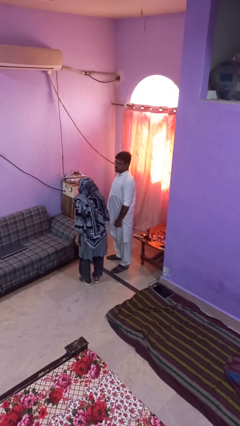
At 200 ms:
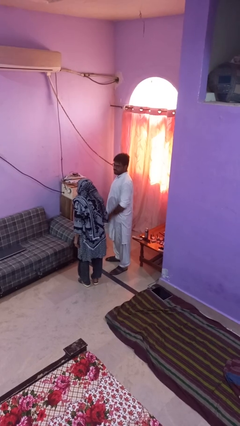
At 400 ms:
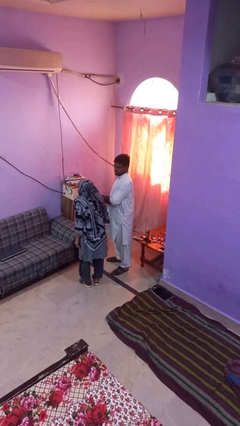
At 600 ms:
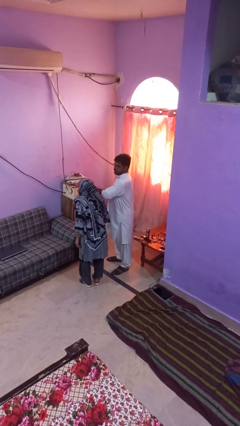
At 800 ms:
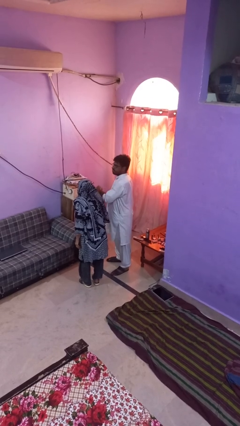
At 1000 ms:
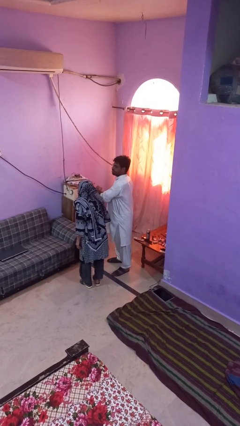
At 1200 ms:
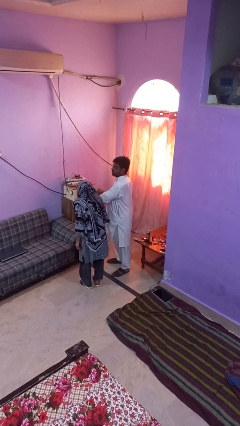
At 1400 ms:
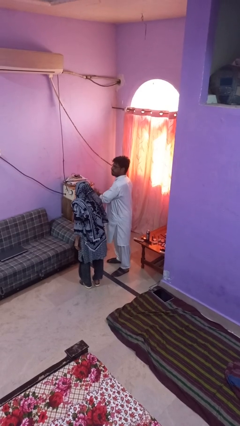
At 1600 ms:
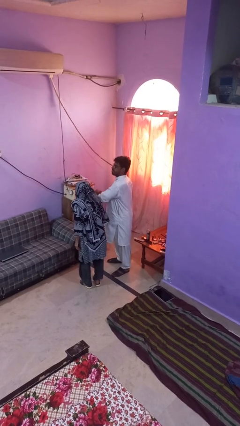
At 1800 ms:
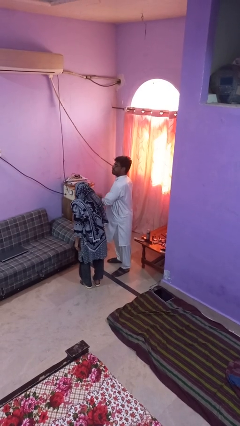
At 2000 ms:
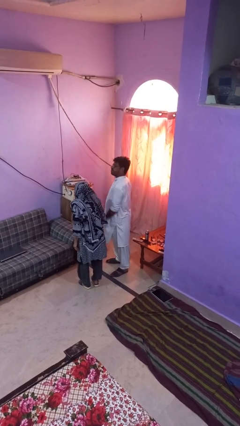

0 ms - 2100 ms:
person nudges person with elbow

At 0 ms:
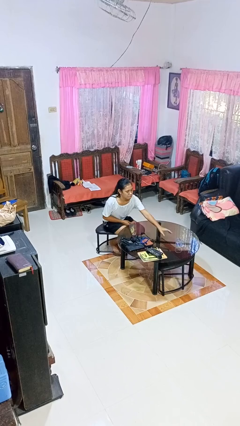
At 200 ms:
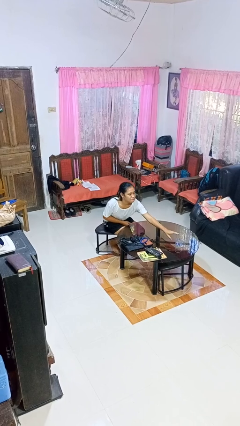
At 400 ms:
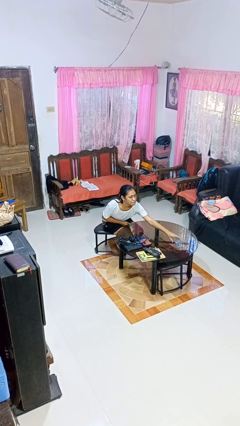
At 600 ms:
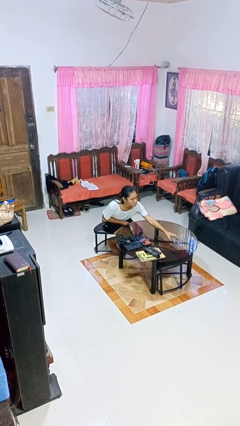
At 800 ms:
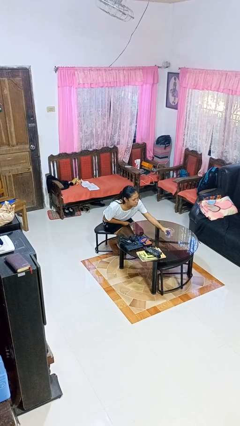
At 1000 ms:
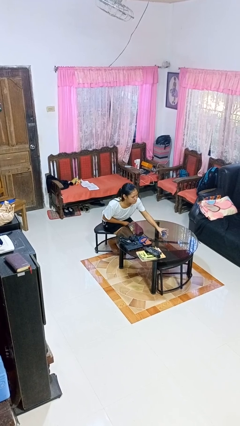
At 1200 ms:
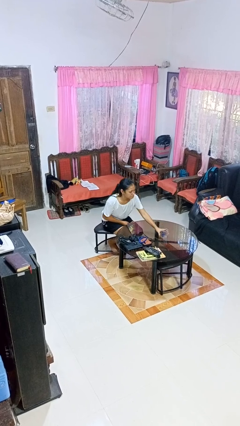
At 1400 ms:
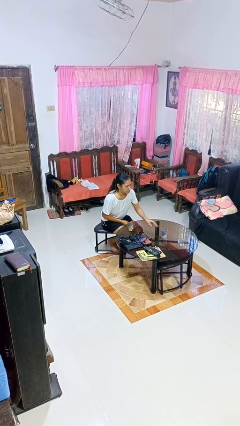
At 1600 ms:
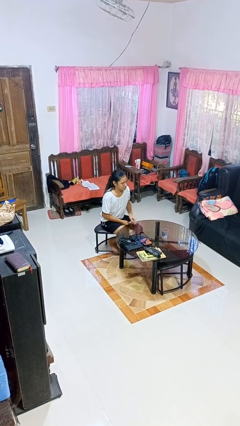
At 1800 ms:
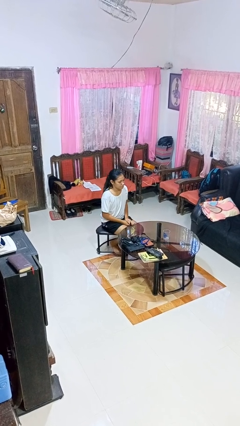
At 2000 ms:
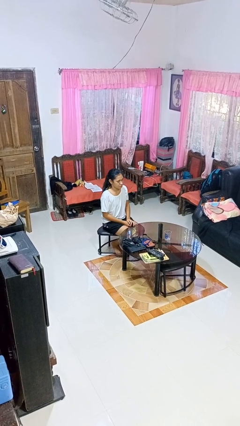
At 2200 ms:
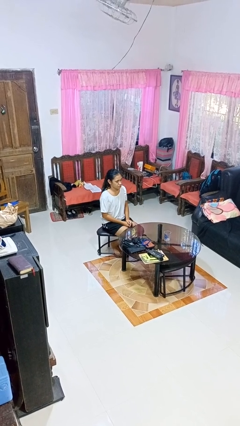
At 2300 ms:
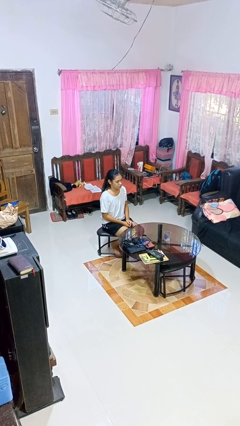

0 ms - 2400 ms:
person sets upright glass

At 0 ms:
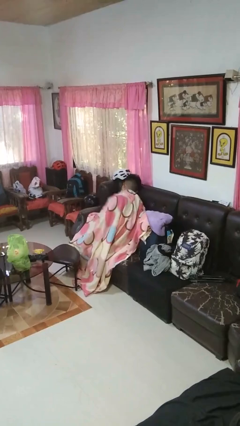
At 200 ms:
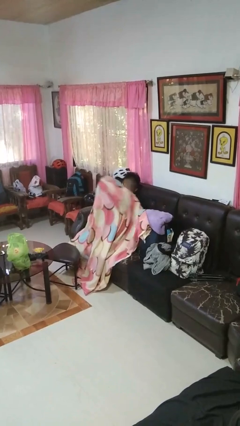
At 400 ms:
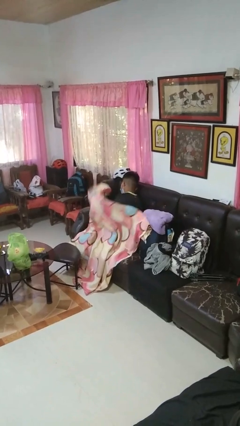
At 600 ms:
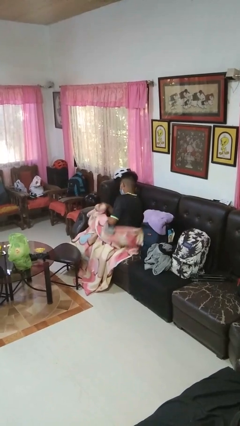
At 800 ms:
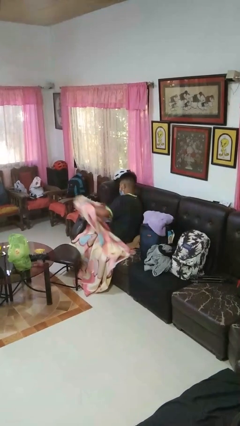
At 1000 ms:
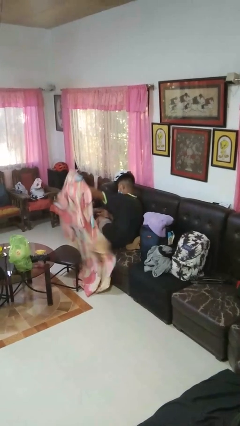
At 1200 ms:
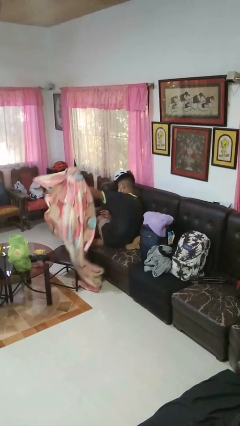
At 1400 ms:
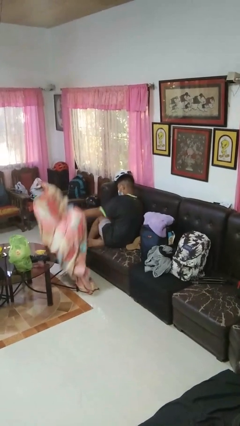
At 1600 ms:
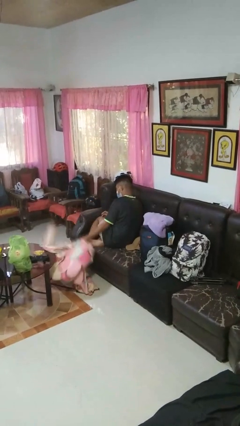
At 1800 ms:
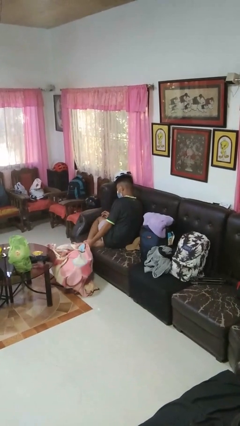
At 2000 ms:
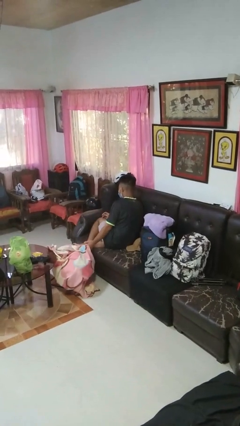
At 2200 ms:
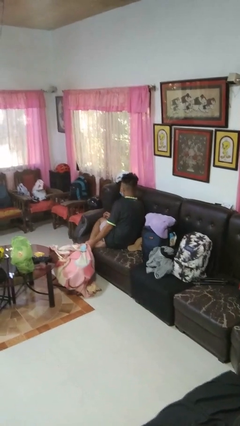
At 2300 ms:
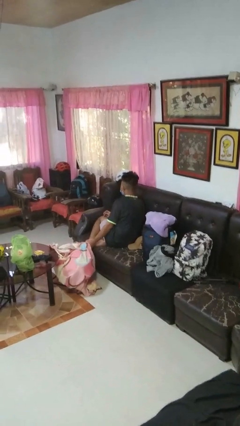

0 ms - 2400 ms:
person uncovers with blanket

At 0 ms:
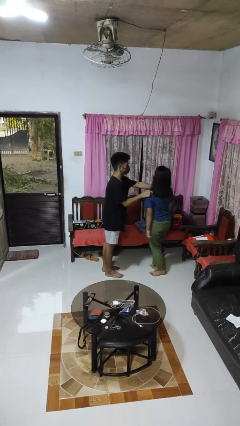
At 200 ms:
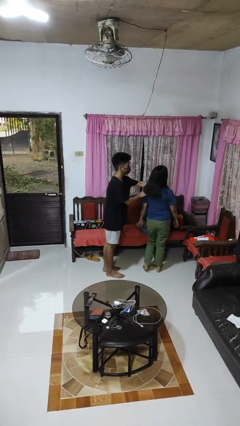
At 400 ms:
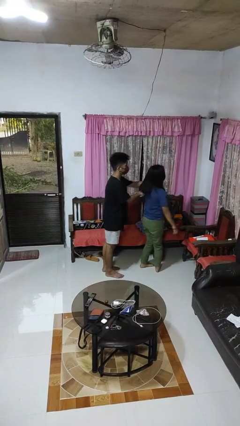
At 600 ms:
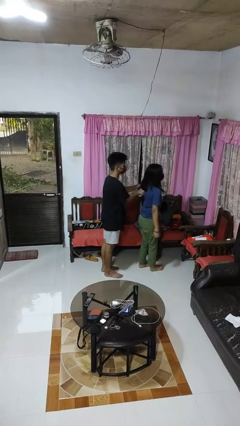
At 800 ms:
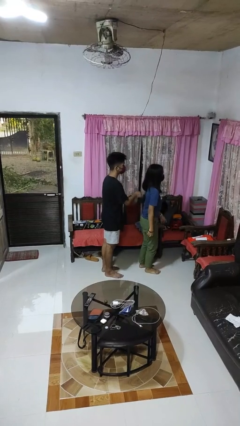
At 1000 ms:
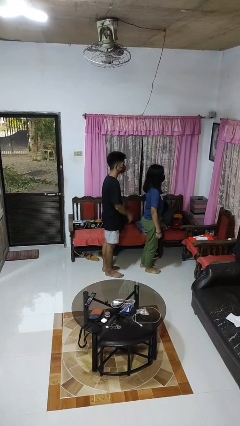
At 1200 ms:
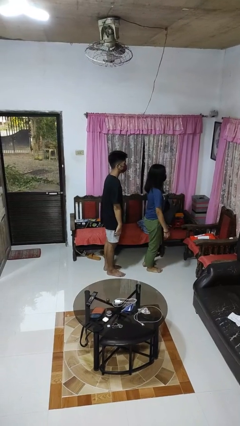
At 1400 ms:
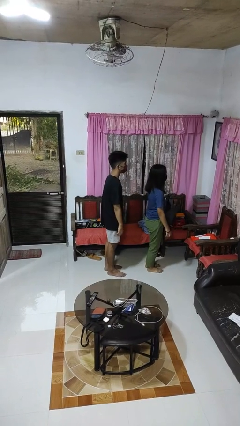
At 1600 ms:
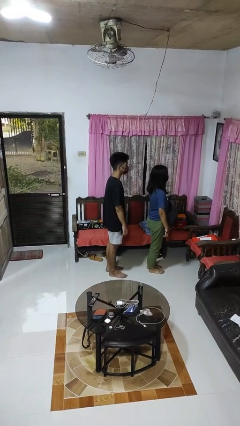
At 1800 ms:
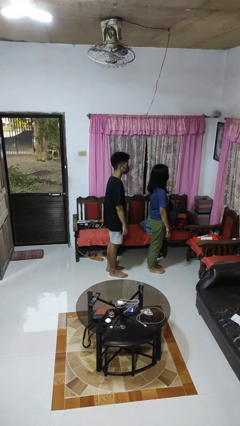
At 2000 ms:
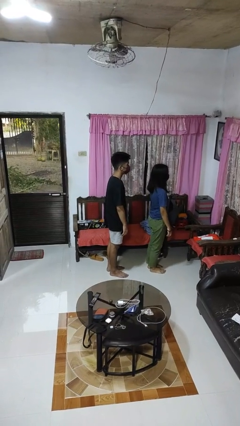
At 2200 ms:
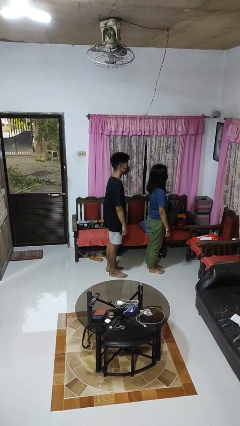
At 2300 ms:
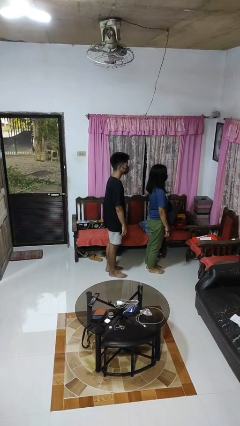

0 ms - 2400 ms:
person spins person around

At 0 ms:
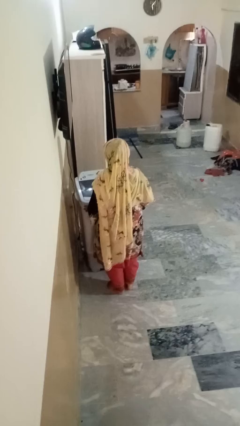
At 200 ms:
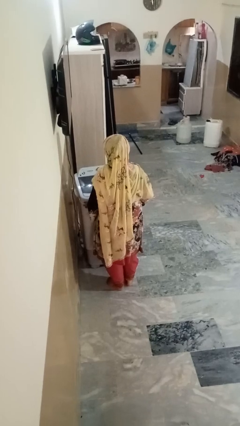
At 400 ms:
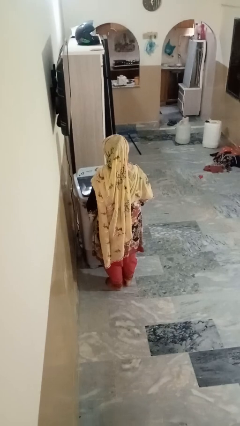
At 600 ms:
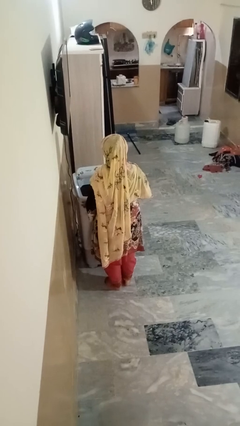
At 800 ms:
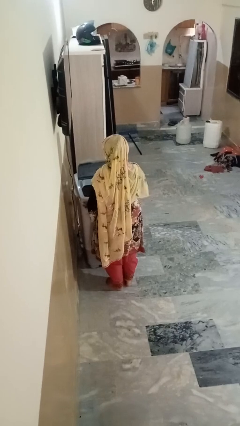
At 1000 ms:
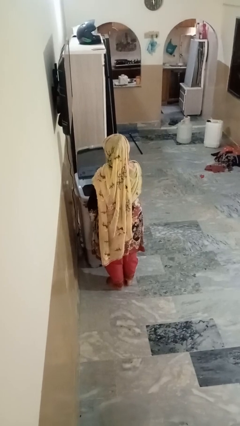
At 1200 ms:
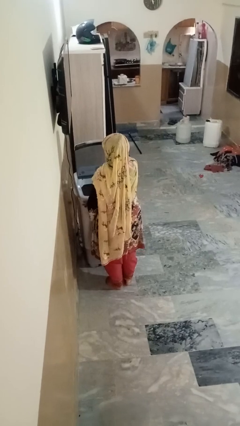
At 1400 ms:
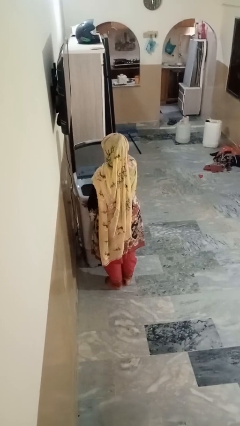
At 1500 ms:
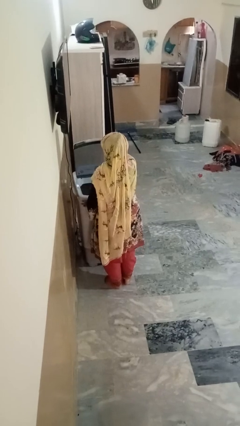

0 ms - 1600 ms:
person opens clothes washer

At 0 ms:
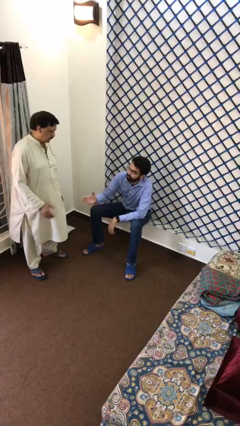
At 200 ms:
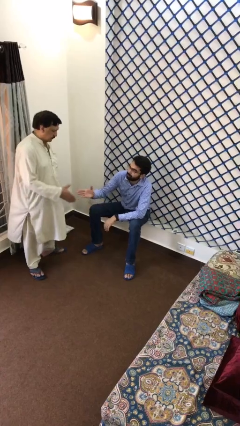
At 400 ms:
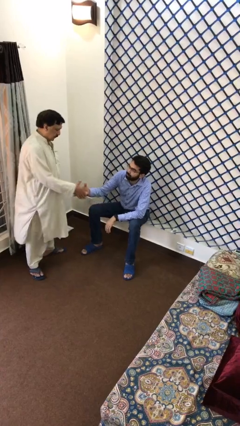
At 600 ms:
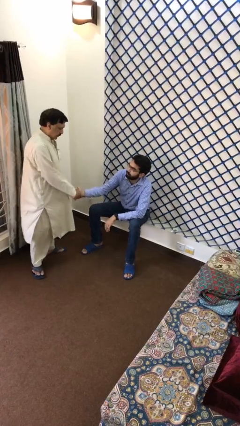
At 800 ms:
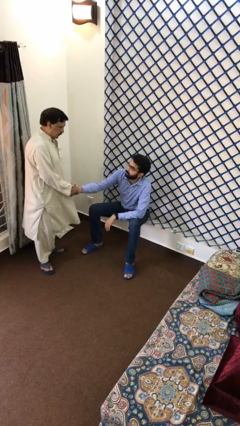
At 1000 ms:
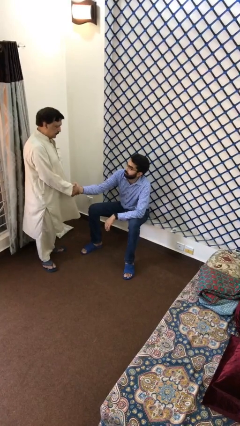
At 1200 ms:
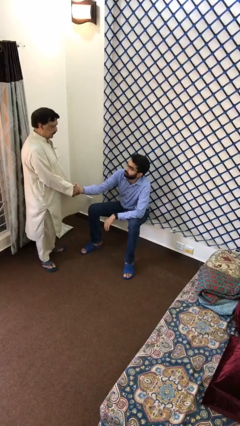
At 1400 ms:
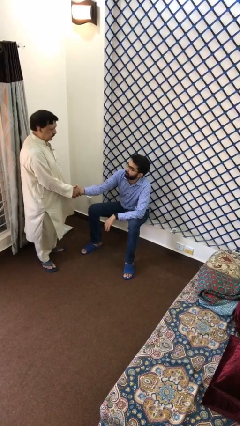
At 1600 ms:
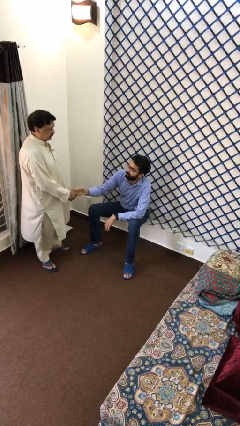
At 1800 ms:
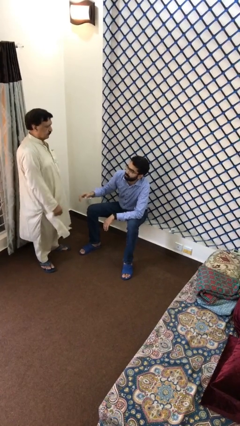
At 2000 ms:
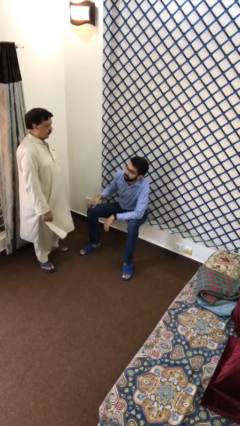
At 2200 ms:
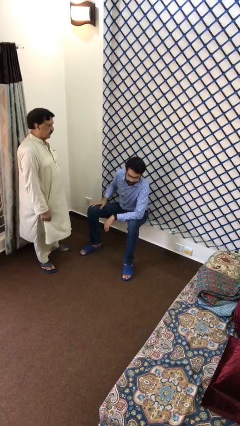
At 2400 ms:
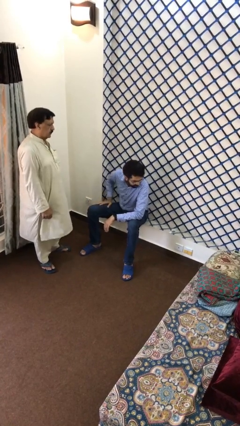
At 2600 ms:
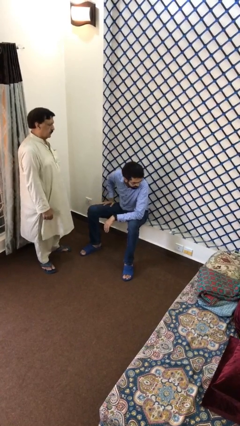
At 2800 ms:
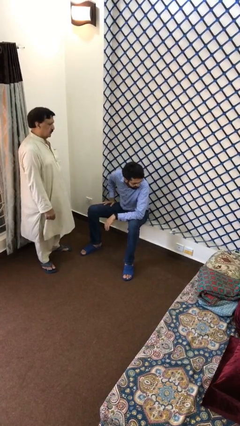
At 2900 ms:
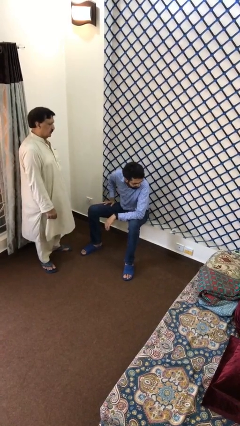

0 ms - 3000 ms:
person shakes hand

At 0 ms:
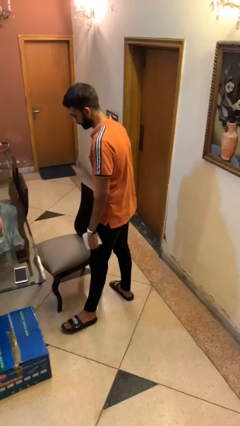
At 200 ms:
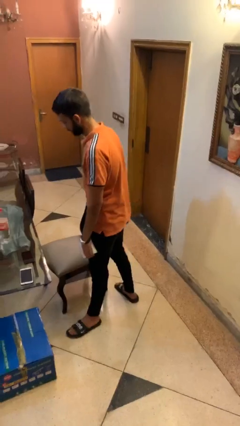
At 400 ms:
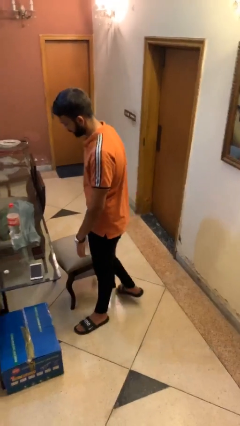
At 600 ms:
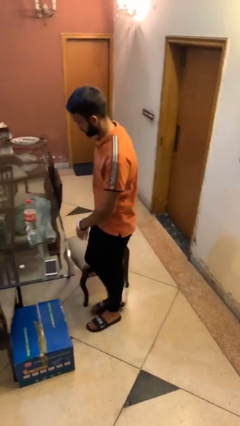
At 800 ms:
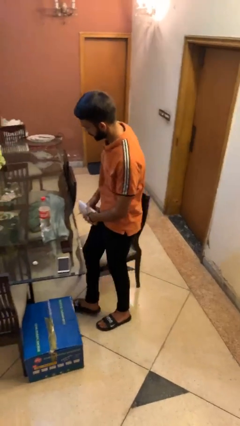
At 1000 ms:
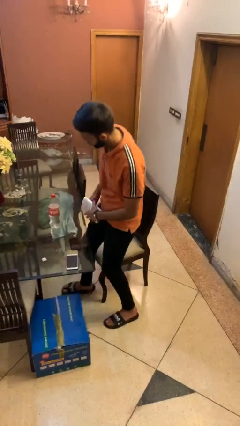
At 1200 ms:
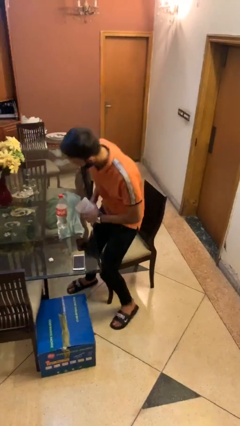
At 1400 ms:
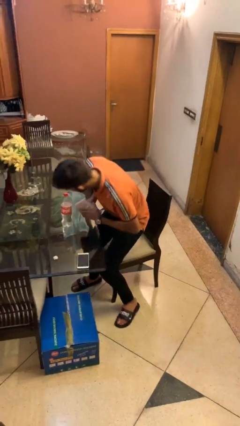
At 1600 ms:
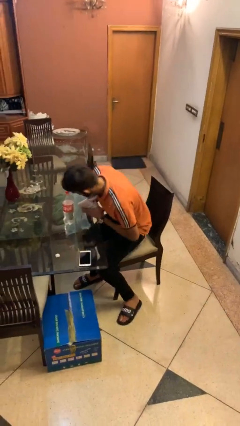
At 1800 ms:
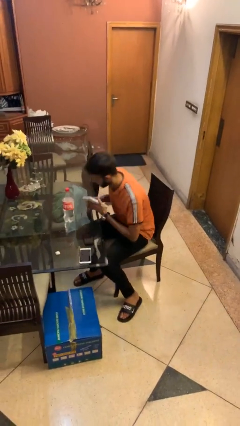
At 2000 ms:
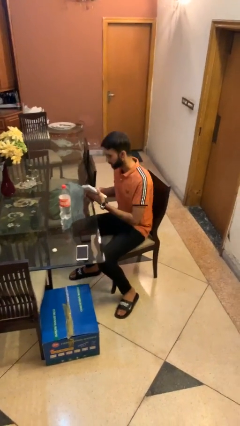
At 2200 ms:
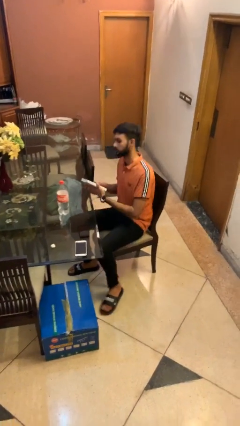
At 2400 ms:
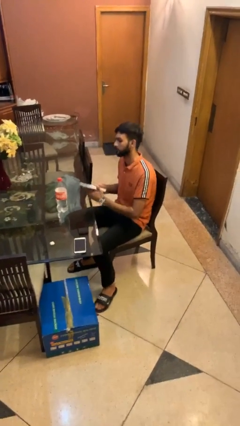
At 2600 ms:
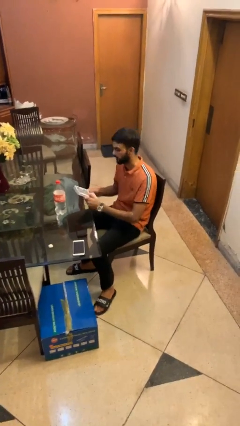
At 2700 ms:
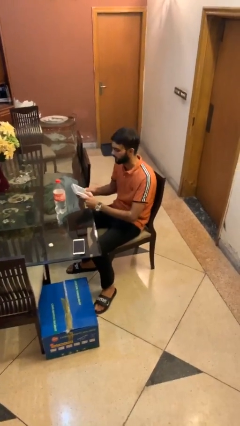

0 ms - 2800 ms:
person sits down
